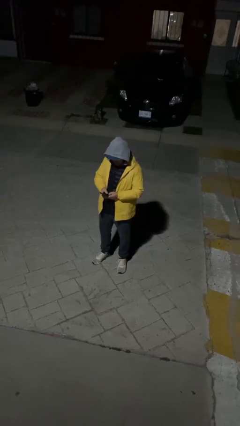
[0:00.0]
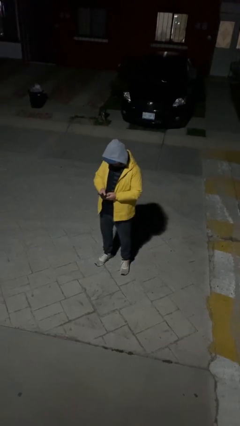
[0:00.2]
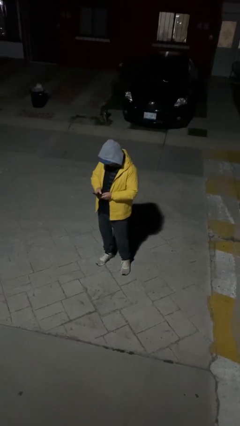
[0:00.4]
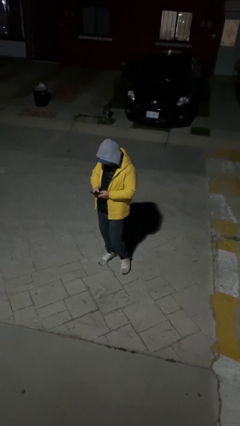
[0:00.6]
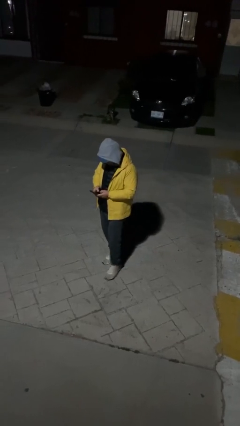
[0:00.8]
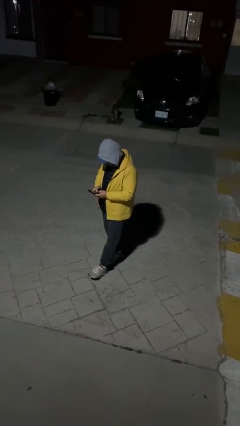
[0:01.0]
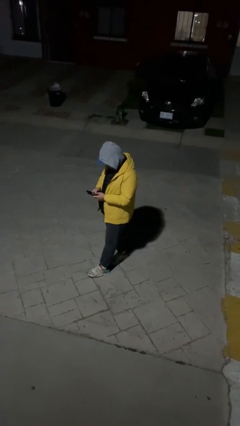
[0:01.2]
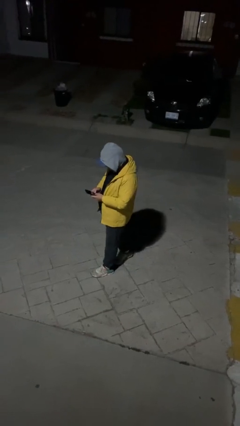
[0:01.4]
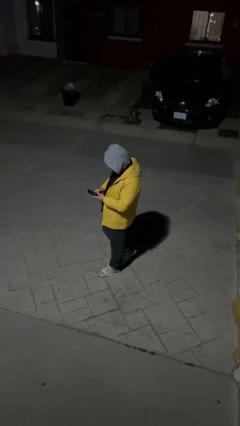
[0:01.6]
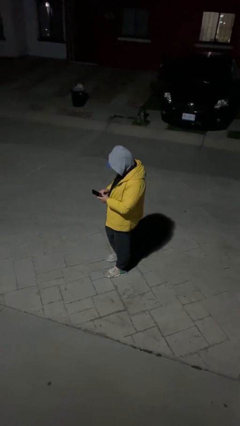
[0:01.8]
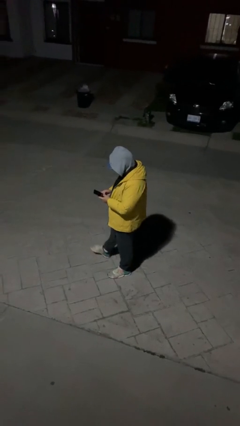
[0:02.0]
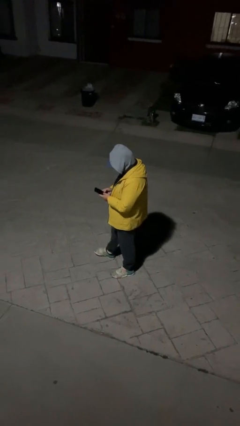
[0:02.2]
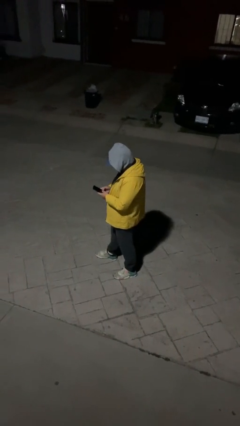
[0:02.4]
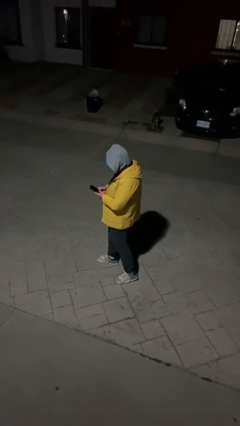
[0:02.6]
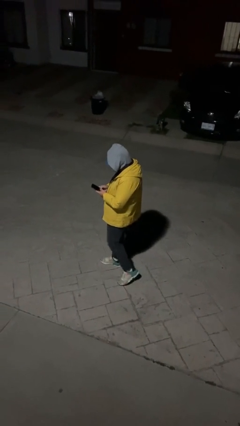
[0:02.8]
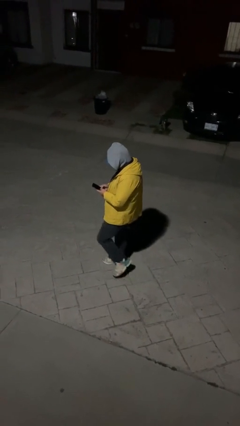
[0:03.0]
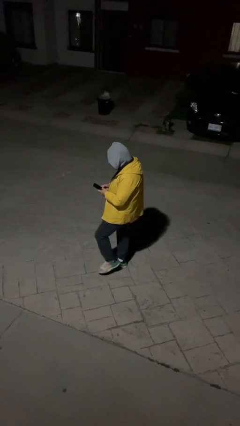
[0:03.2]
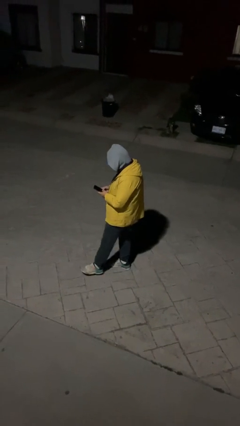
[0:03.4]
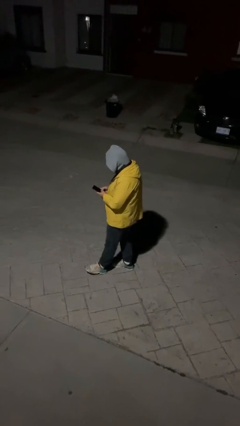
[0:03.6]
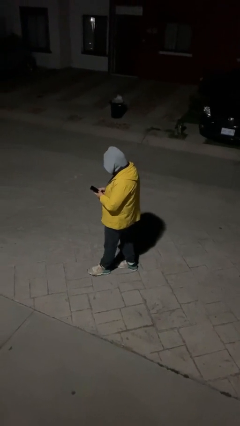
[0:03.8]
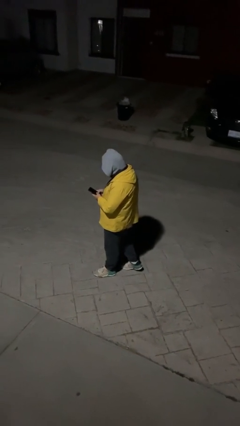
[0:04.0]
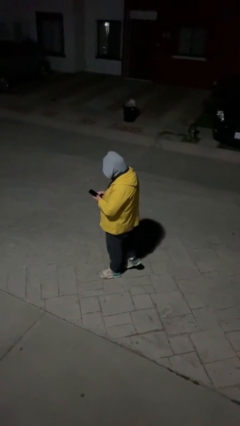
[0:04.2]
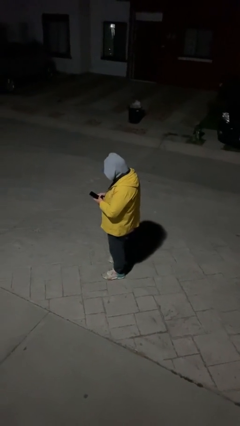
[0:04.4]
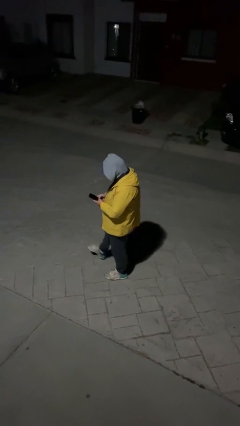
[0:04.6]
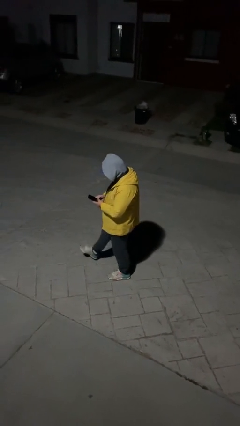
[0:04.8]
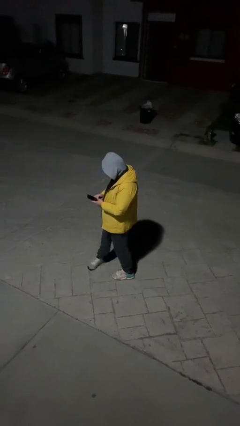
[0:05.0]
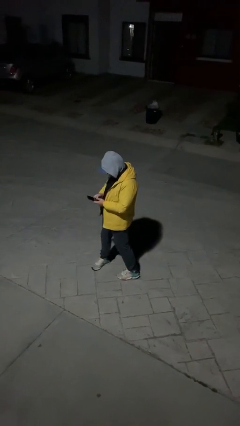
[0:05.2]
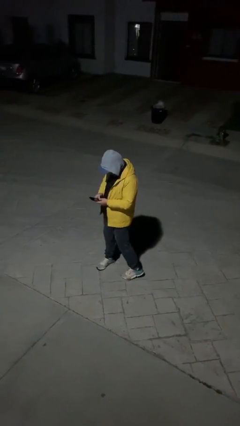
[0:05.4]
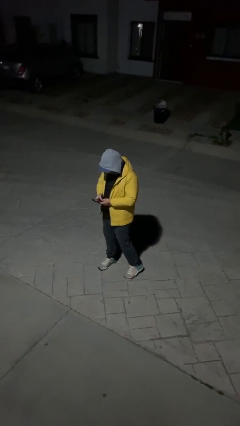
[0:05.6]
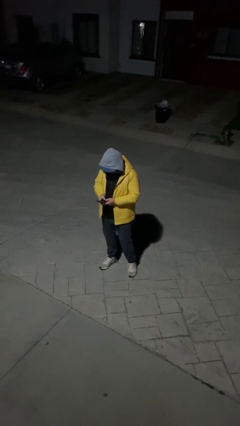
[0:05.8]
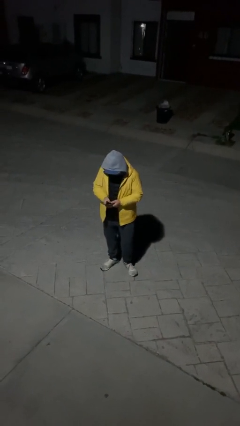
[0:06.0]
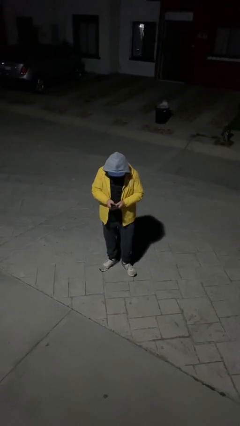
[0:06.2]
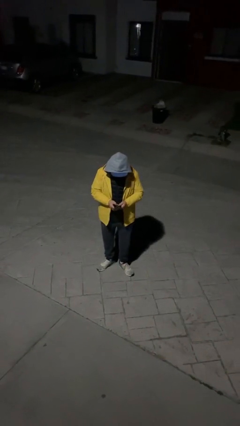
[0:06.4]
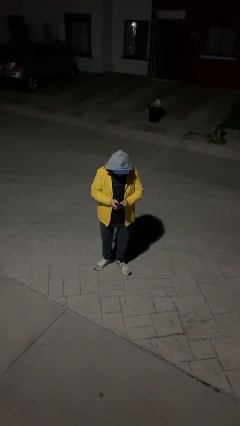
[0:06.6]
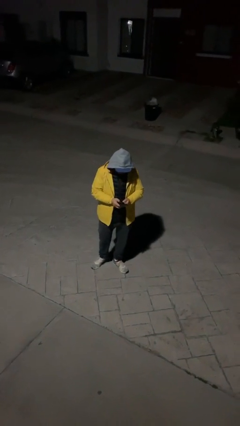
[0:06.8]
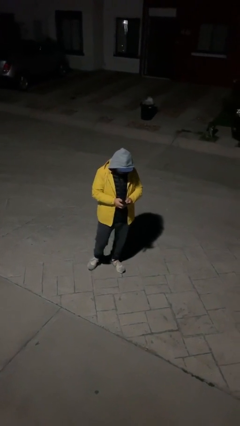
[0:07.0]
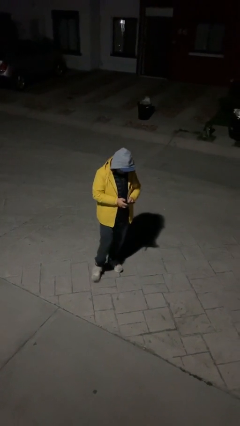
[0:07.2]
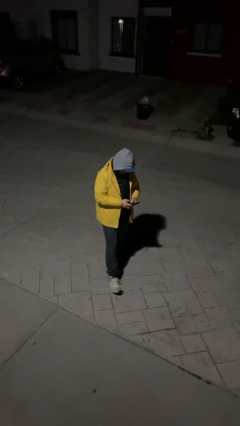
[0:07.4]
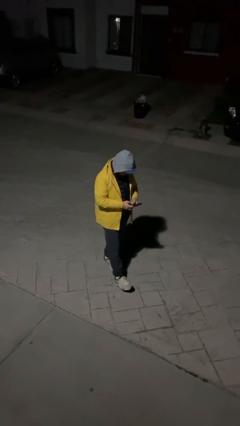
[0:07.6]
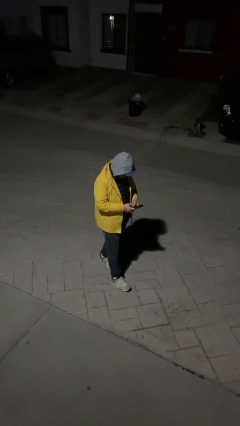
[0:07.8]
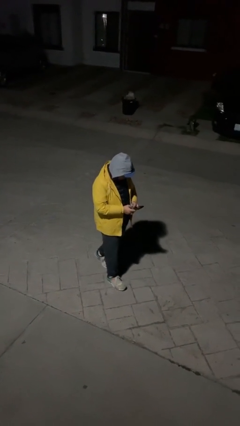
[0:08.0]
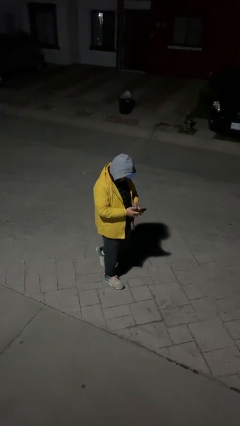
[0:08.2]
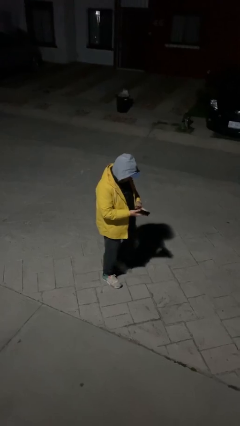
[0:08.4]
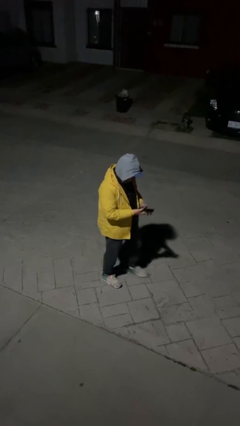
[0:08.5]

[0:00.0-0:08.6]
person texts on phone

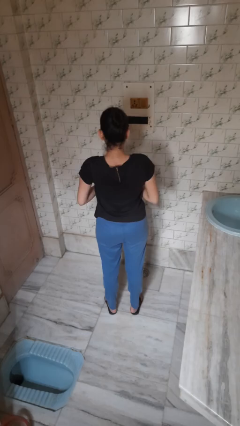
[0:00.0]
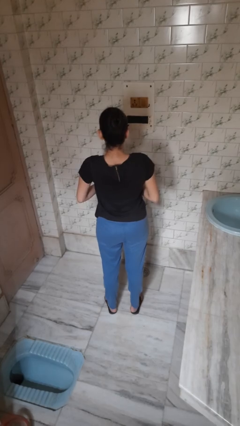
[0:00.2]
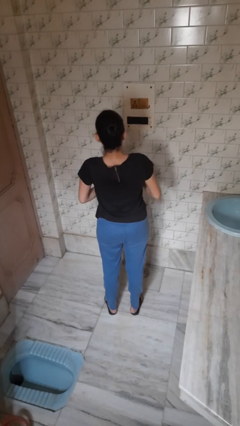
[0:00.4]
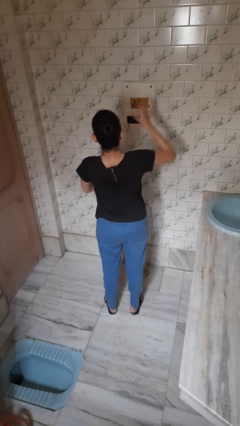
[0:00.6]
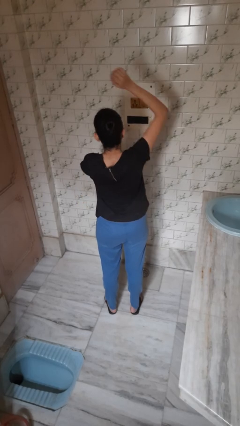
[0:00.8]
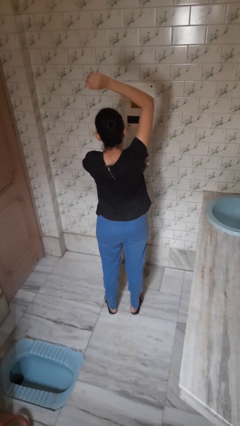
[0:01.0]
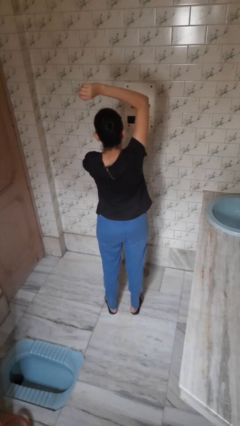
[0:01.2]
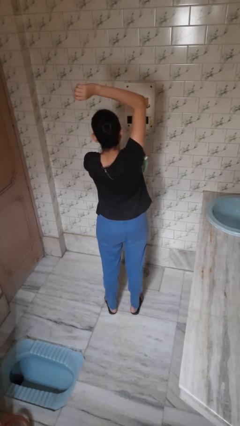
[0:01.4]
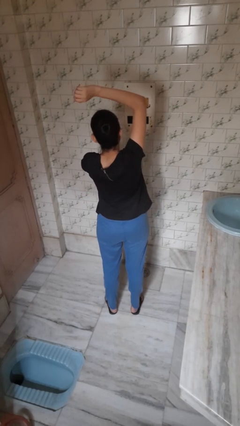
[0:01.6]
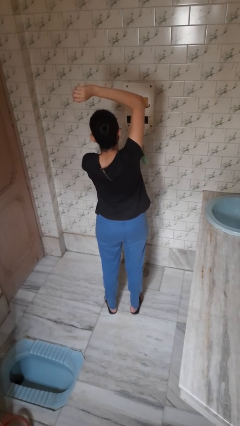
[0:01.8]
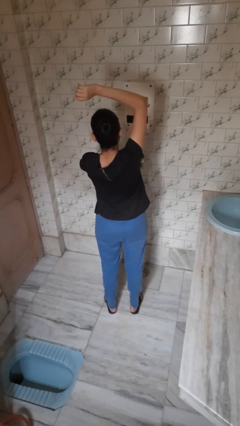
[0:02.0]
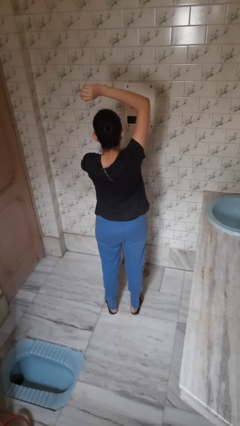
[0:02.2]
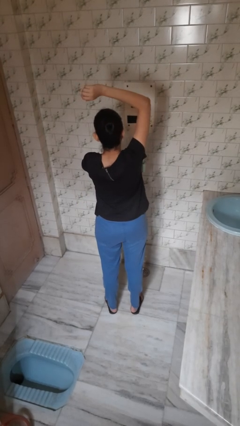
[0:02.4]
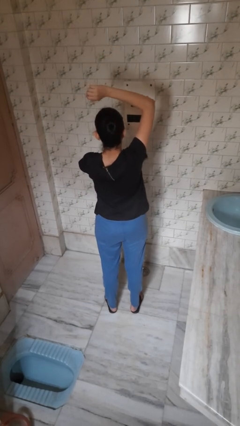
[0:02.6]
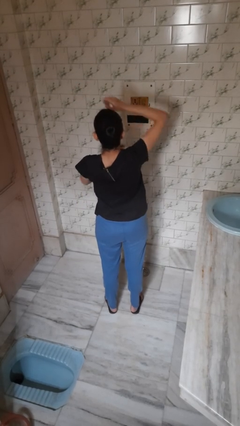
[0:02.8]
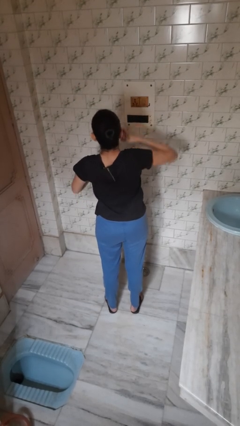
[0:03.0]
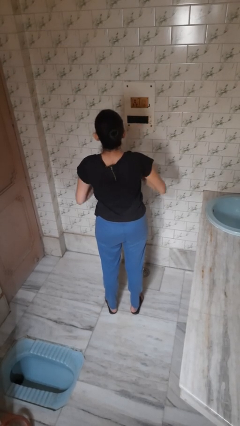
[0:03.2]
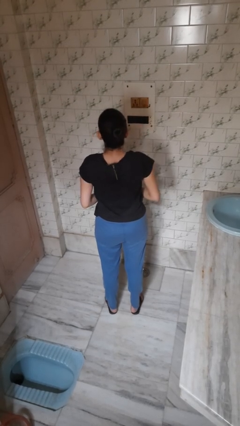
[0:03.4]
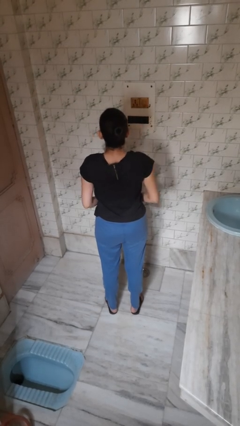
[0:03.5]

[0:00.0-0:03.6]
person applies deodorant

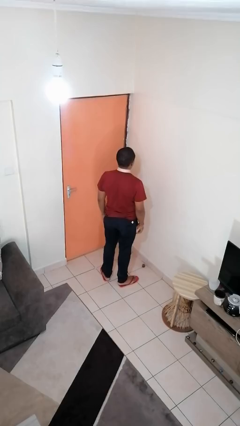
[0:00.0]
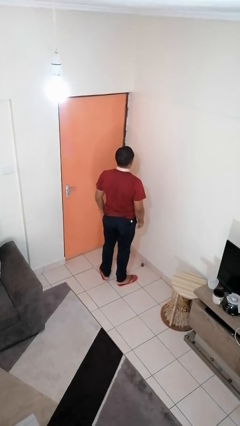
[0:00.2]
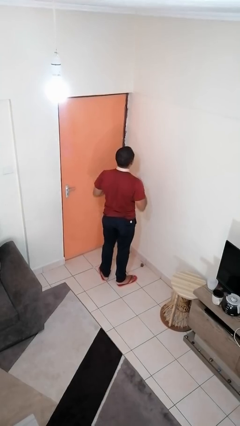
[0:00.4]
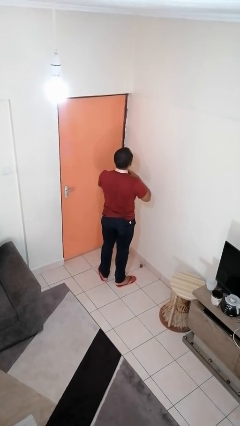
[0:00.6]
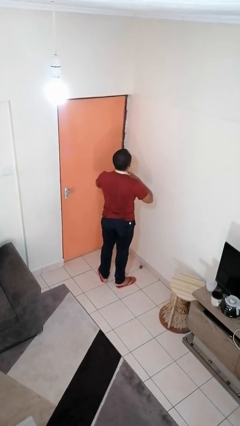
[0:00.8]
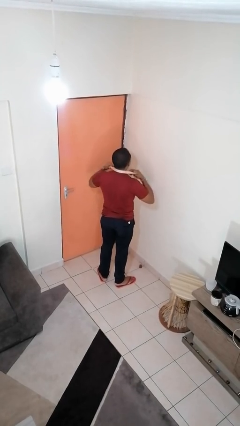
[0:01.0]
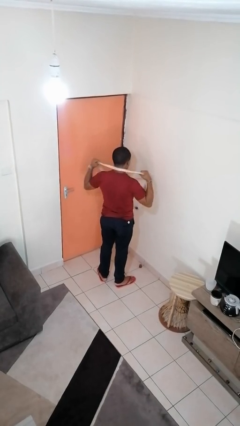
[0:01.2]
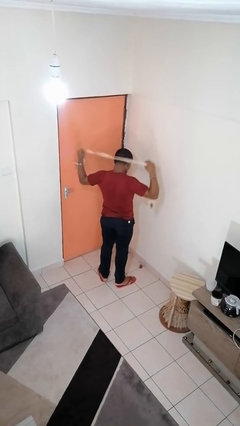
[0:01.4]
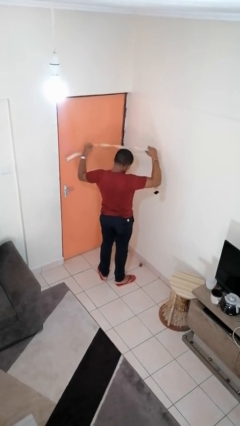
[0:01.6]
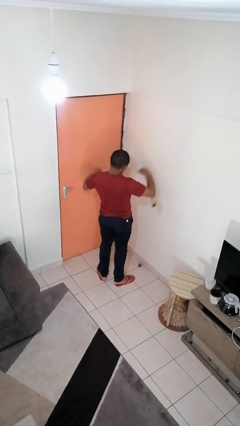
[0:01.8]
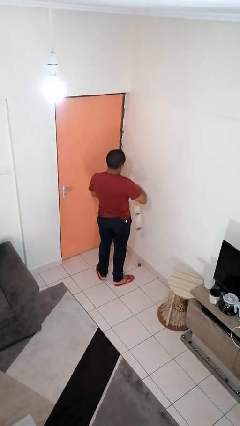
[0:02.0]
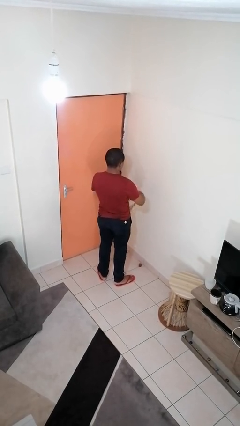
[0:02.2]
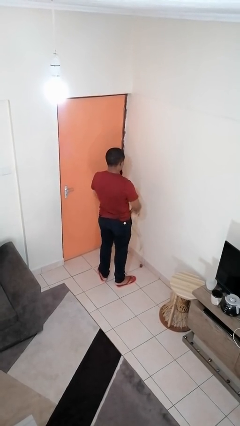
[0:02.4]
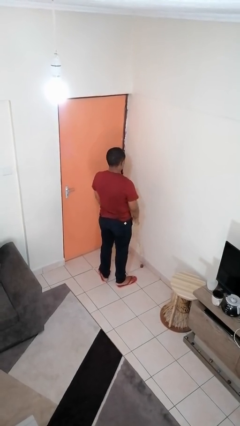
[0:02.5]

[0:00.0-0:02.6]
person takes off necktie

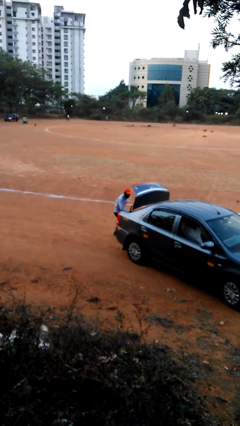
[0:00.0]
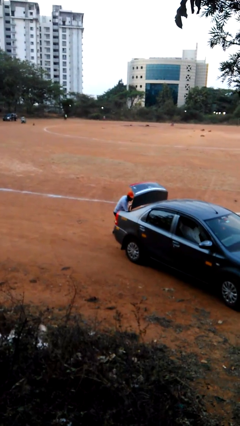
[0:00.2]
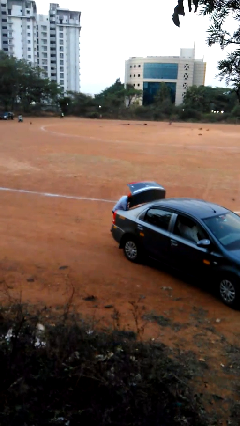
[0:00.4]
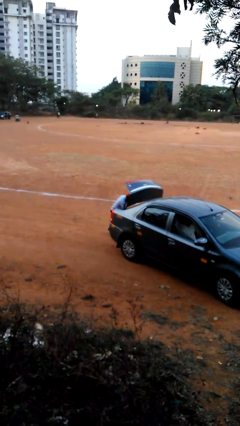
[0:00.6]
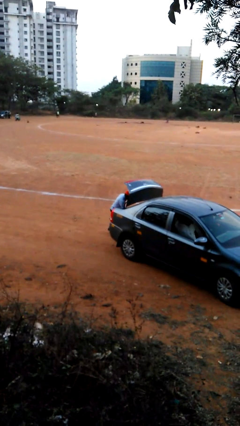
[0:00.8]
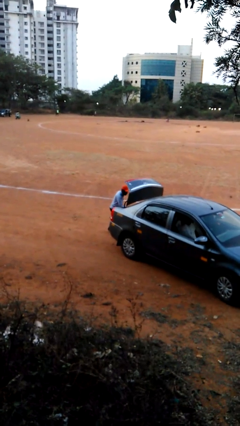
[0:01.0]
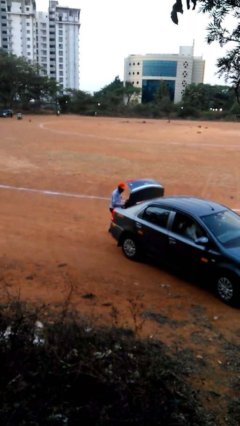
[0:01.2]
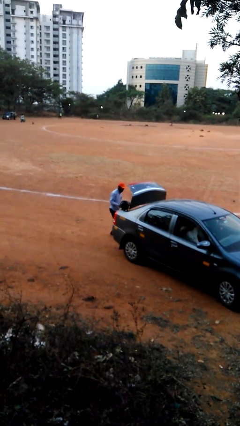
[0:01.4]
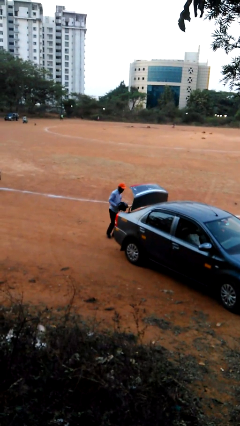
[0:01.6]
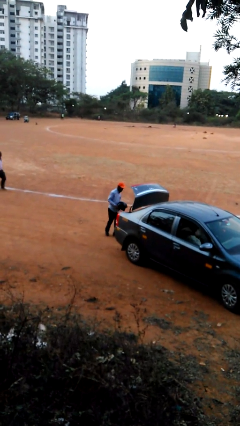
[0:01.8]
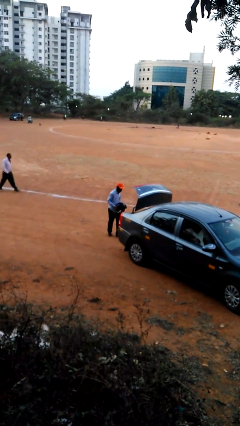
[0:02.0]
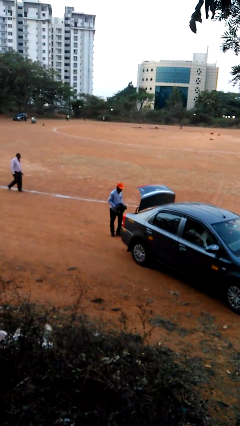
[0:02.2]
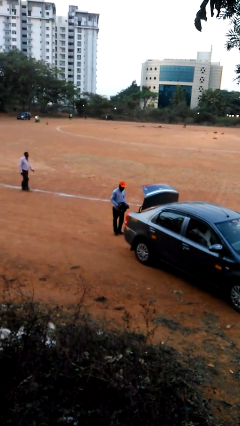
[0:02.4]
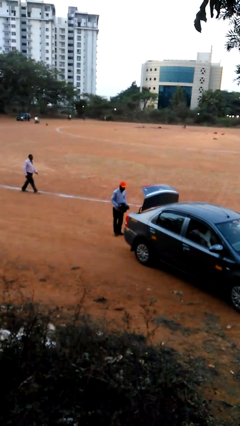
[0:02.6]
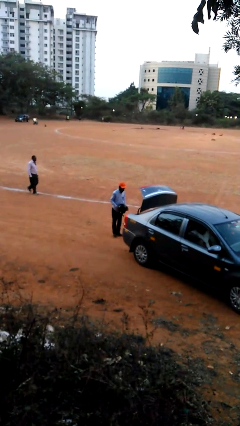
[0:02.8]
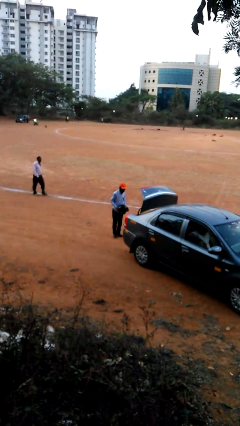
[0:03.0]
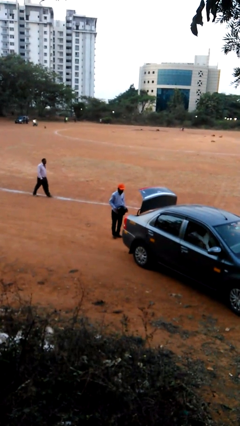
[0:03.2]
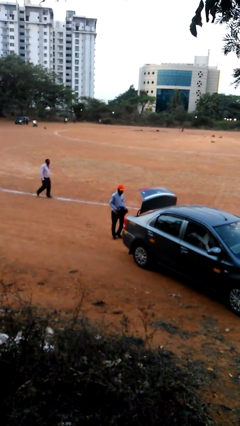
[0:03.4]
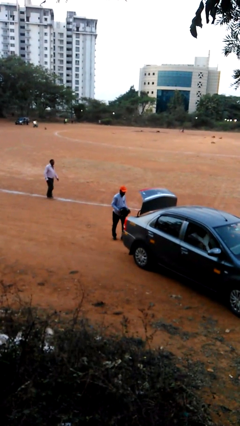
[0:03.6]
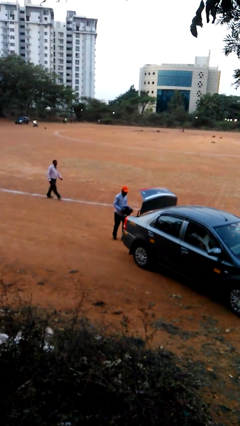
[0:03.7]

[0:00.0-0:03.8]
person unloads car
